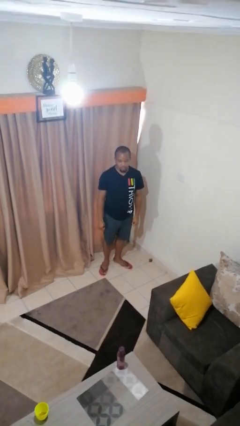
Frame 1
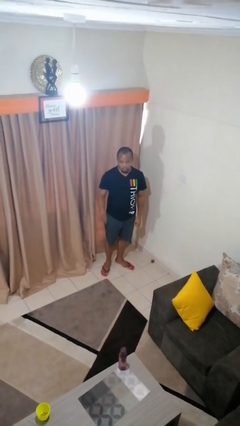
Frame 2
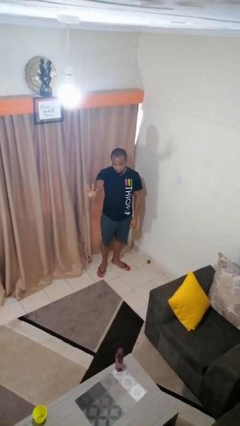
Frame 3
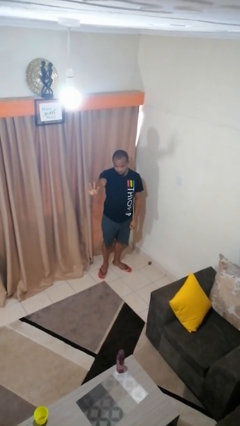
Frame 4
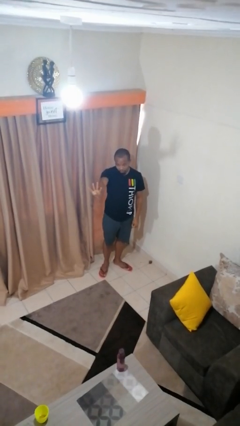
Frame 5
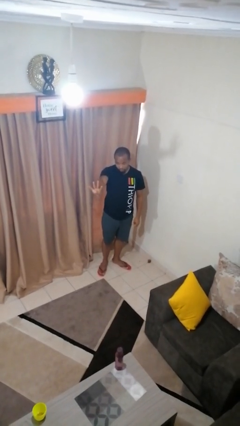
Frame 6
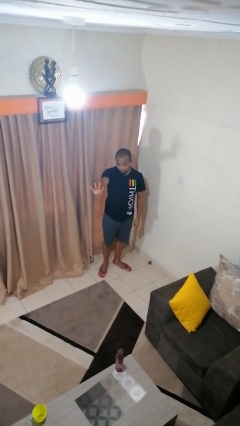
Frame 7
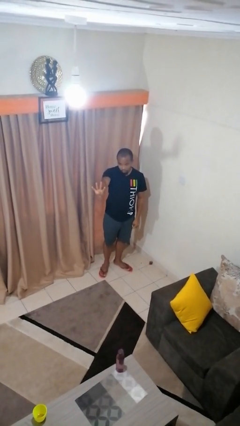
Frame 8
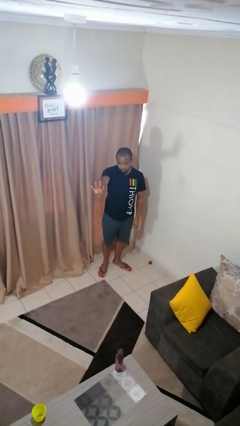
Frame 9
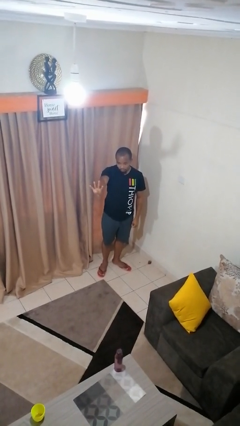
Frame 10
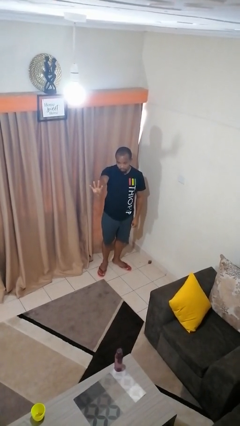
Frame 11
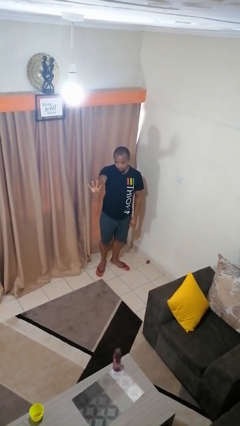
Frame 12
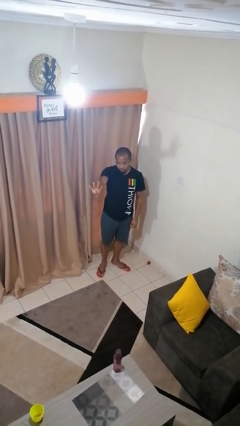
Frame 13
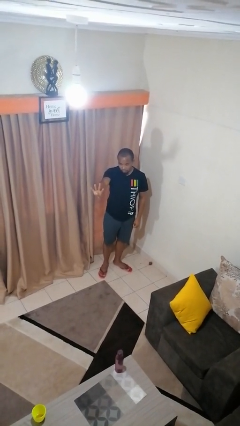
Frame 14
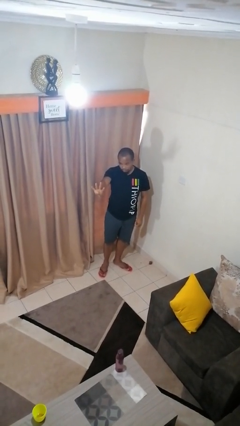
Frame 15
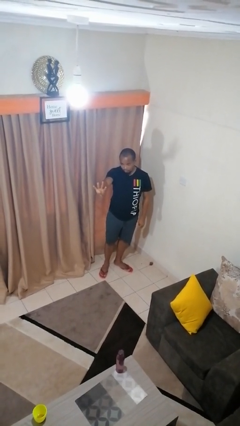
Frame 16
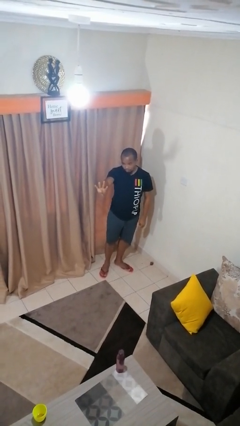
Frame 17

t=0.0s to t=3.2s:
person gestures number four

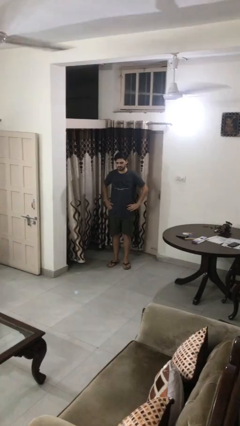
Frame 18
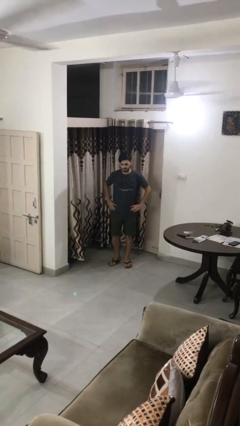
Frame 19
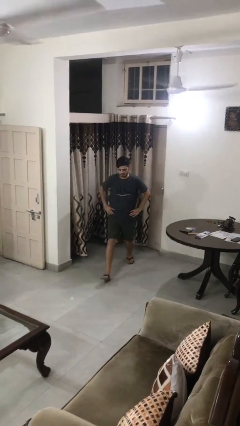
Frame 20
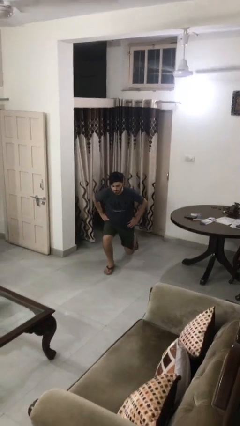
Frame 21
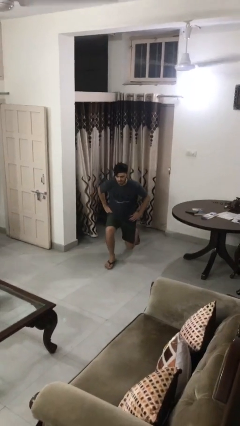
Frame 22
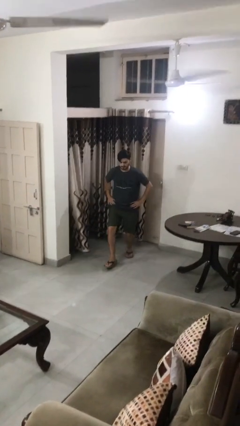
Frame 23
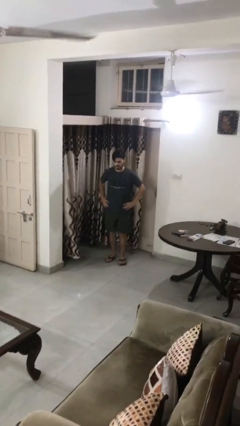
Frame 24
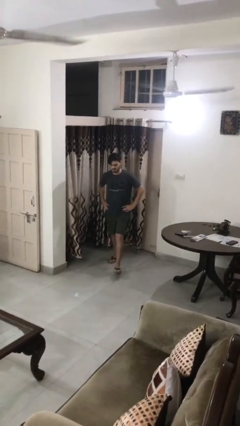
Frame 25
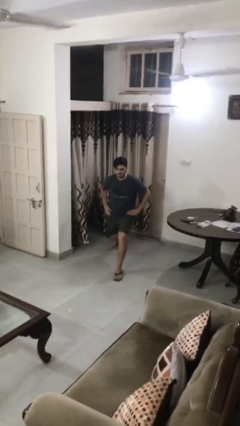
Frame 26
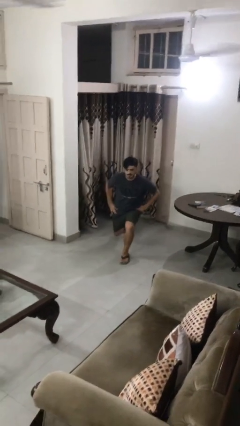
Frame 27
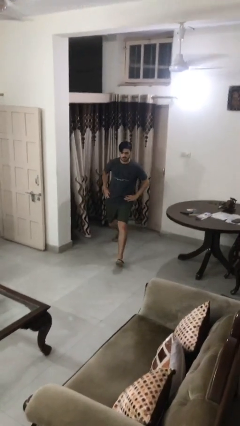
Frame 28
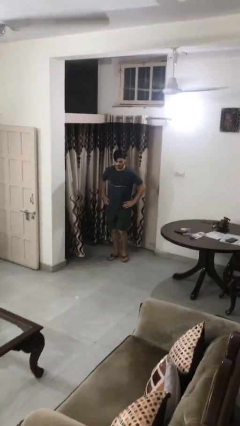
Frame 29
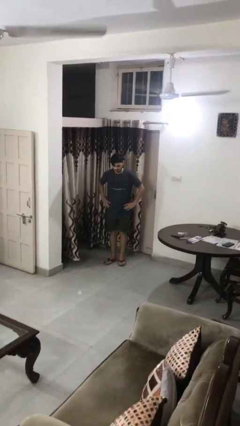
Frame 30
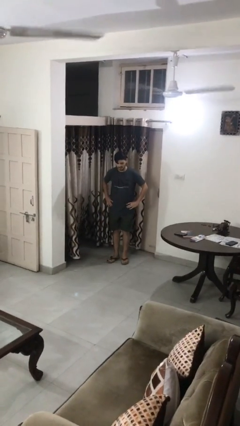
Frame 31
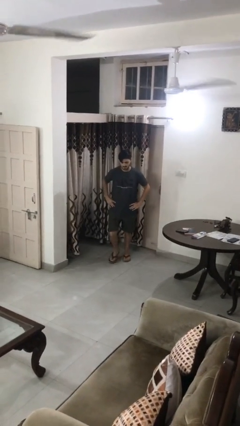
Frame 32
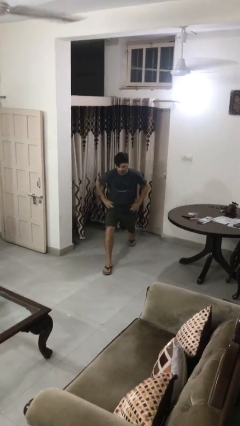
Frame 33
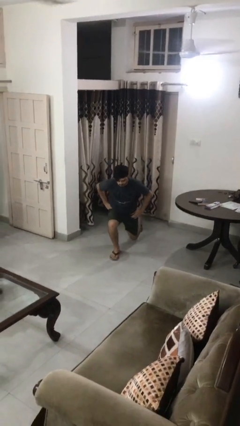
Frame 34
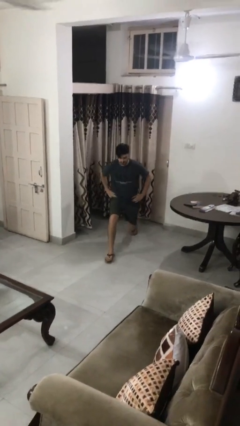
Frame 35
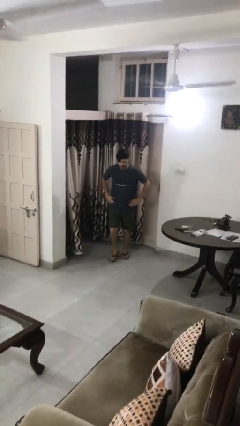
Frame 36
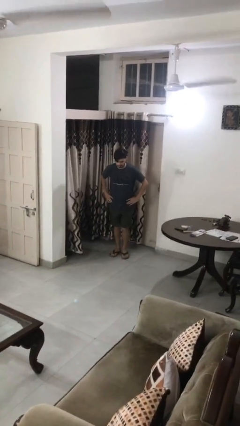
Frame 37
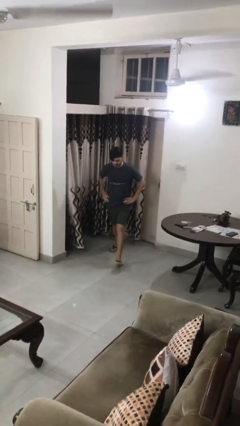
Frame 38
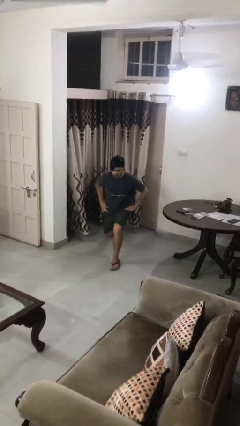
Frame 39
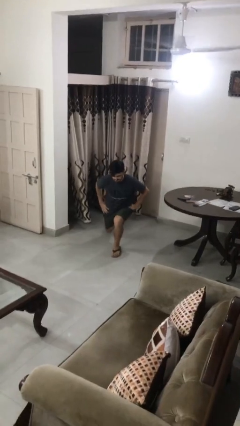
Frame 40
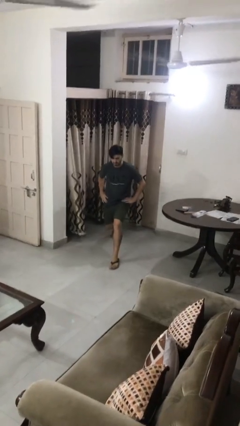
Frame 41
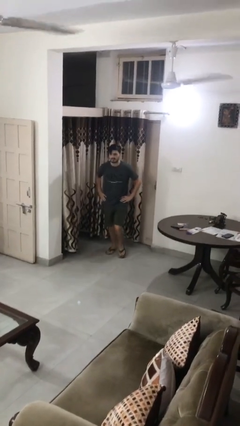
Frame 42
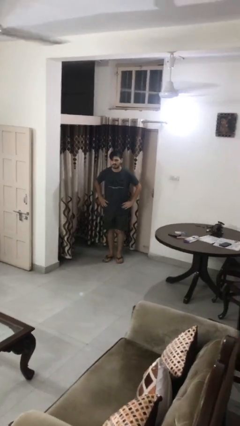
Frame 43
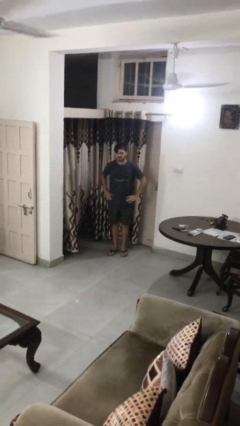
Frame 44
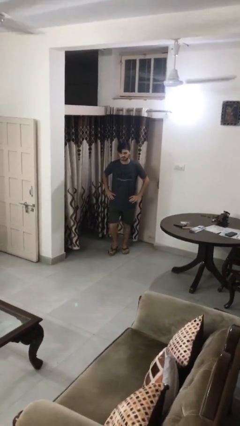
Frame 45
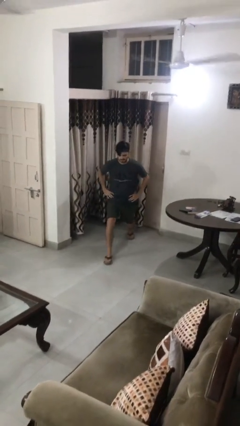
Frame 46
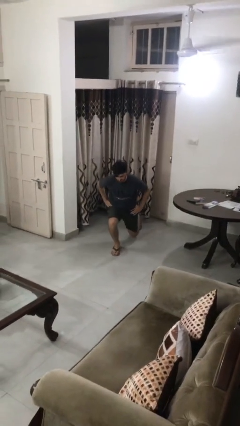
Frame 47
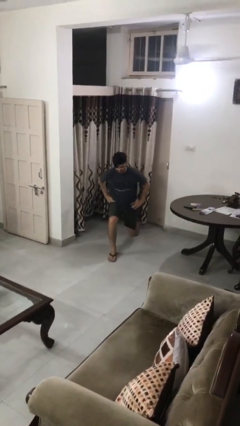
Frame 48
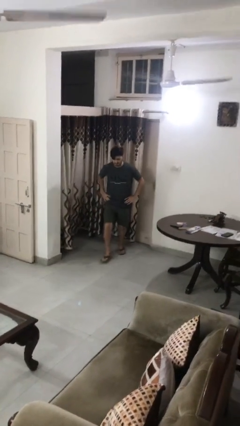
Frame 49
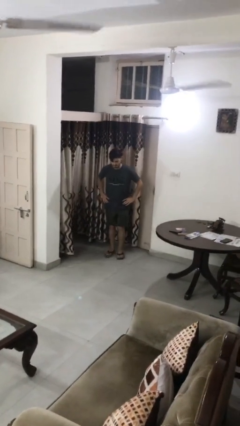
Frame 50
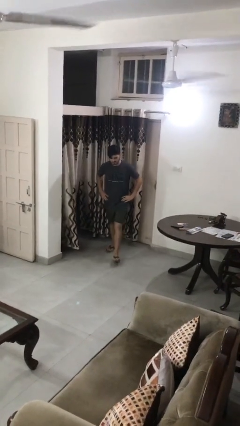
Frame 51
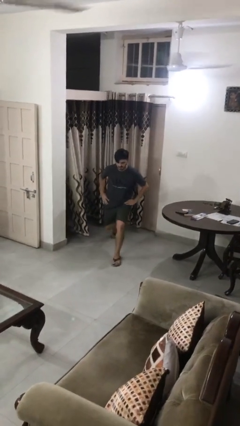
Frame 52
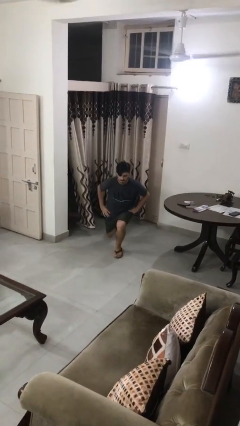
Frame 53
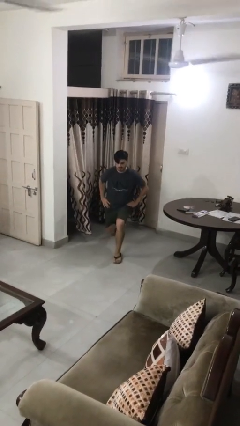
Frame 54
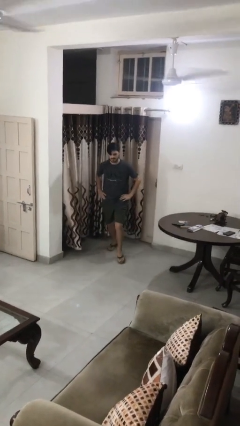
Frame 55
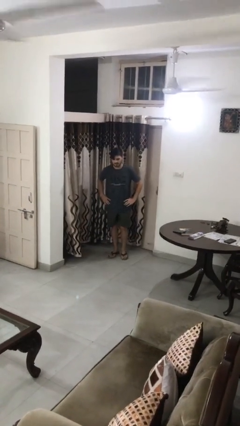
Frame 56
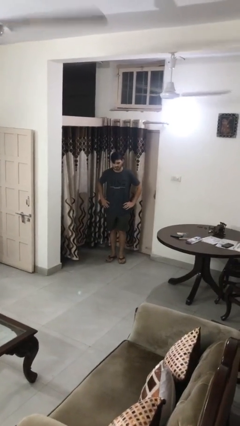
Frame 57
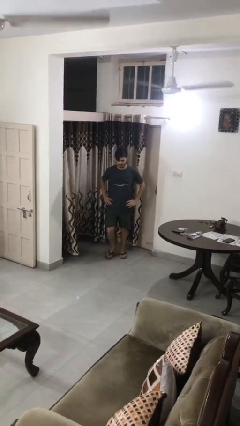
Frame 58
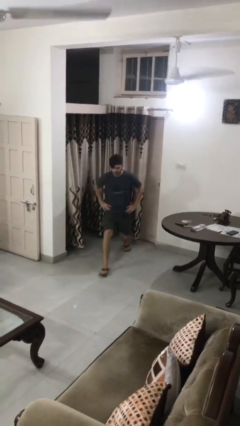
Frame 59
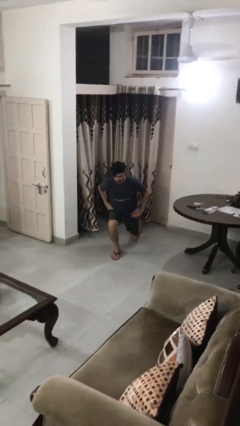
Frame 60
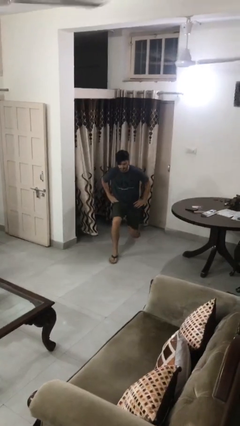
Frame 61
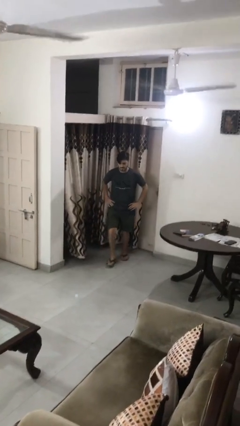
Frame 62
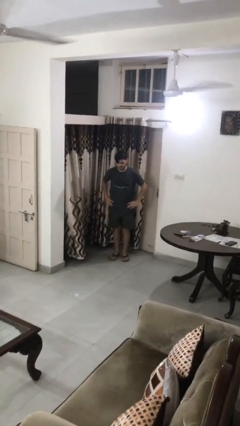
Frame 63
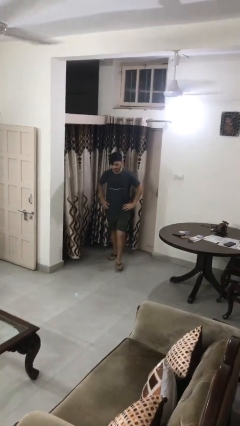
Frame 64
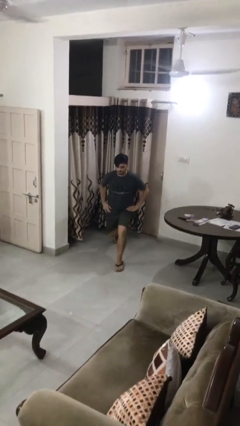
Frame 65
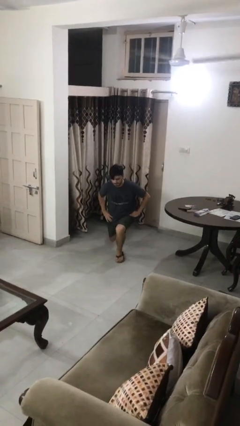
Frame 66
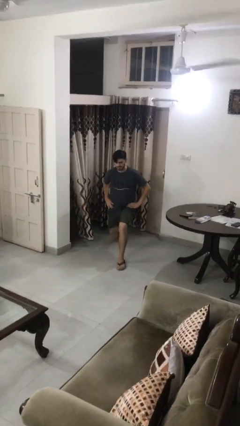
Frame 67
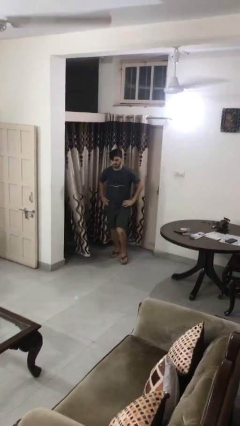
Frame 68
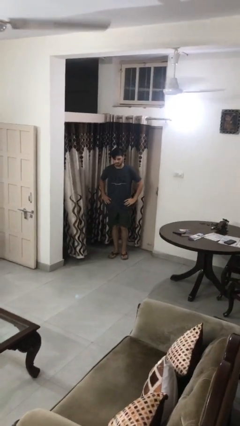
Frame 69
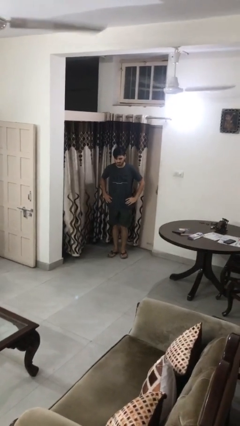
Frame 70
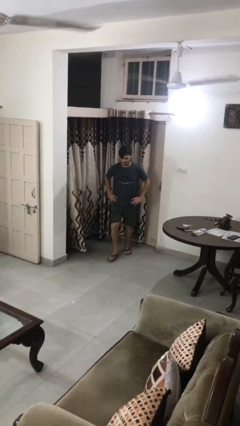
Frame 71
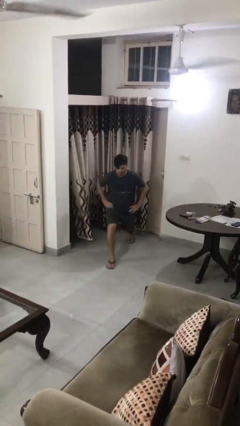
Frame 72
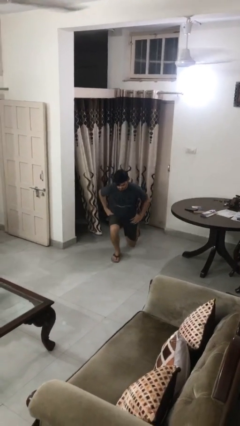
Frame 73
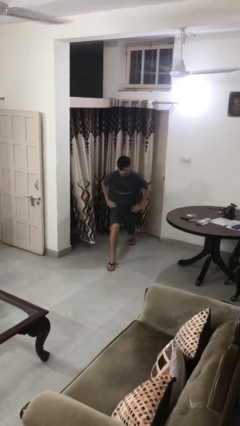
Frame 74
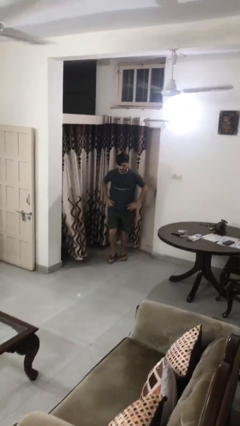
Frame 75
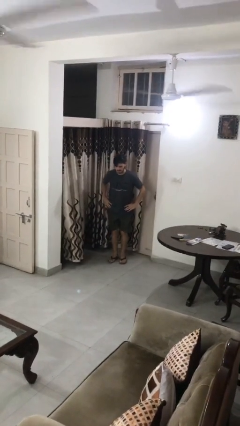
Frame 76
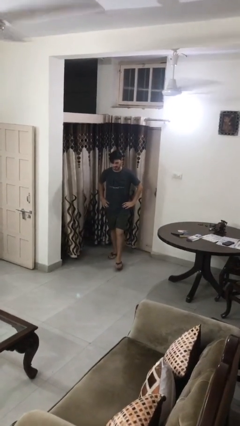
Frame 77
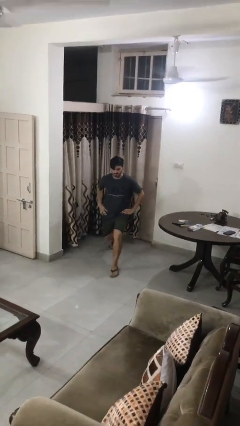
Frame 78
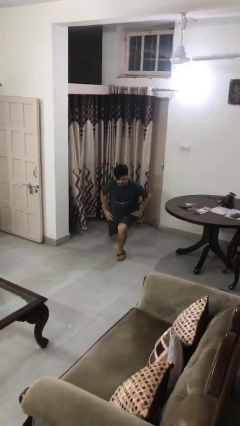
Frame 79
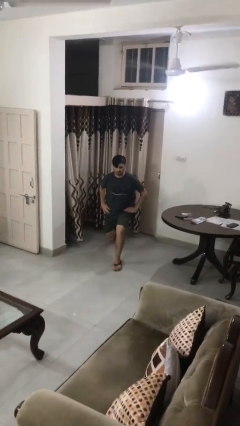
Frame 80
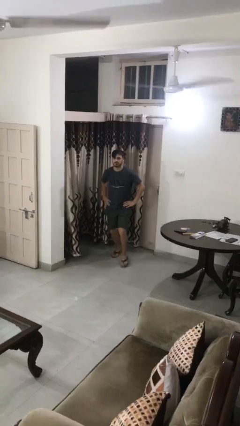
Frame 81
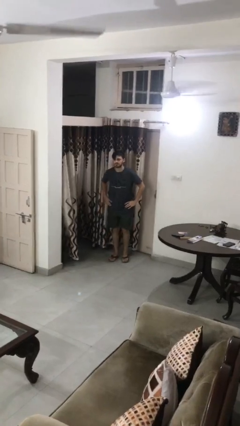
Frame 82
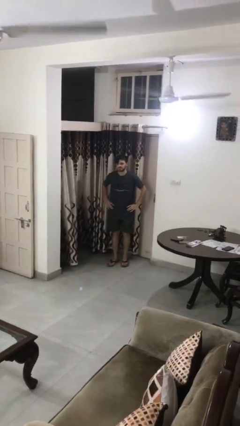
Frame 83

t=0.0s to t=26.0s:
person exercises with lunges

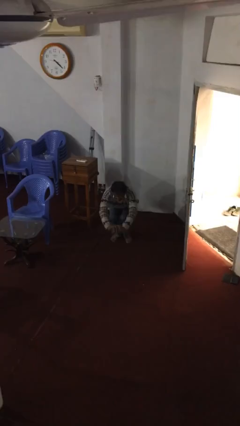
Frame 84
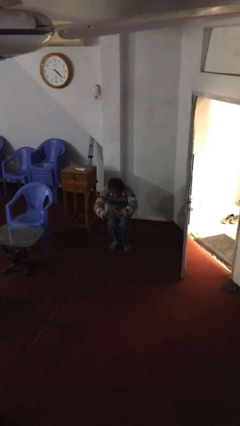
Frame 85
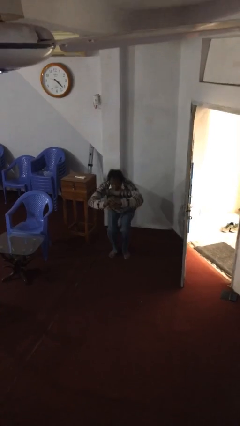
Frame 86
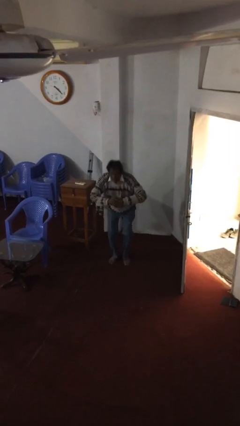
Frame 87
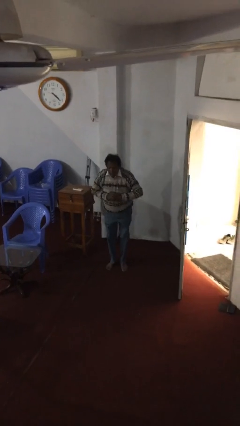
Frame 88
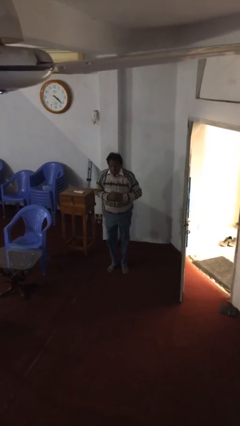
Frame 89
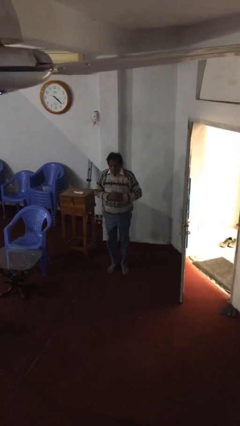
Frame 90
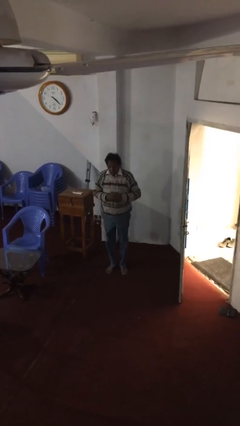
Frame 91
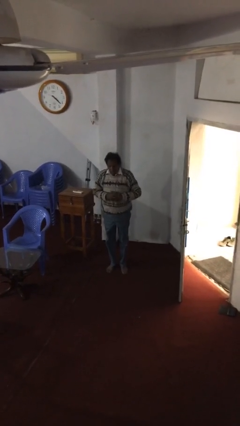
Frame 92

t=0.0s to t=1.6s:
person stands up
